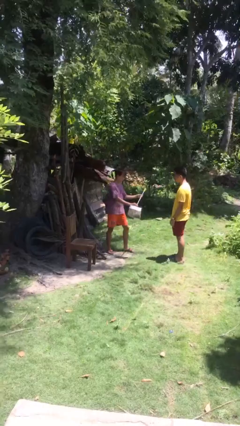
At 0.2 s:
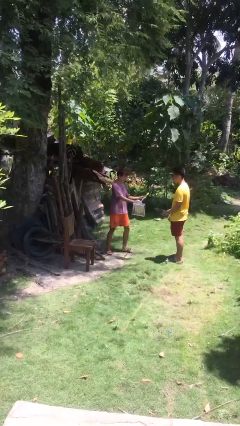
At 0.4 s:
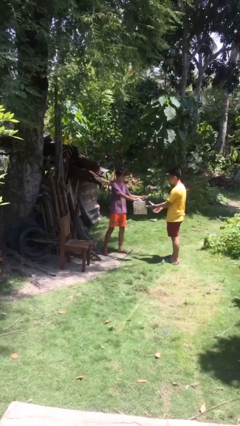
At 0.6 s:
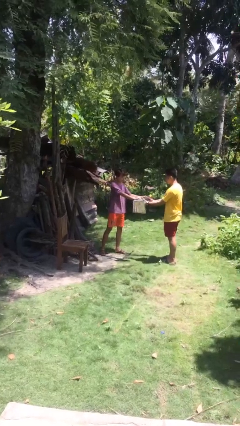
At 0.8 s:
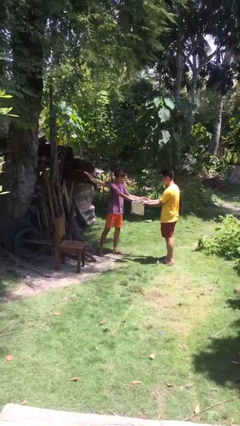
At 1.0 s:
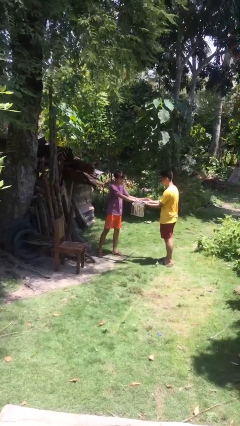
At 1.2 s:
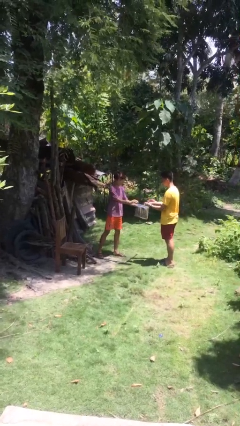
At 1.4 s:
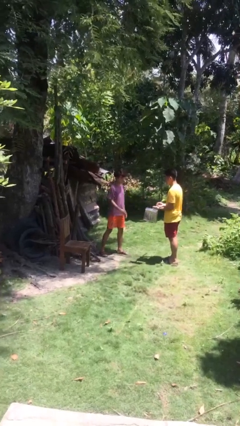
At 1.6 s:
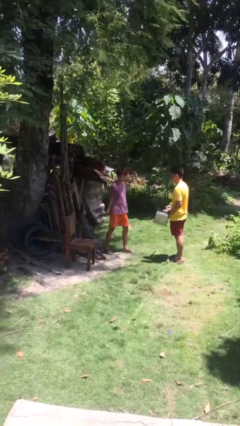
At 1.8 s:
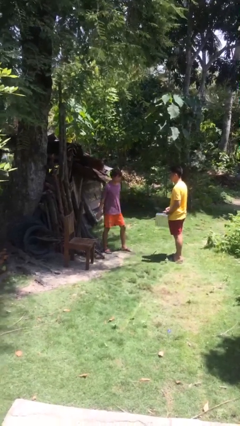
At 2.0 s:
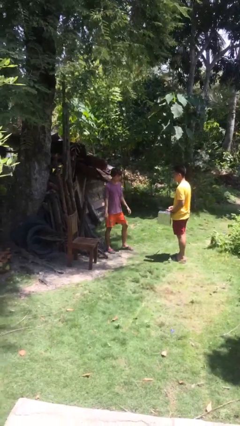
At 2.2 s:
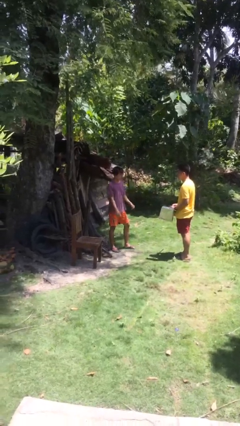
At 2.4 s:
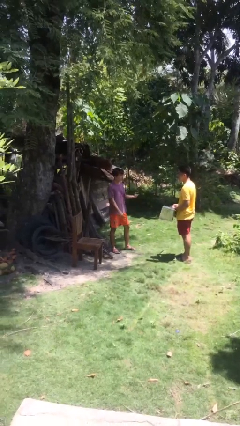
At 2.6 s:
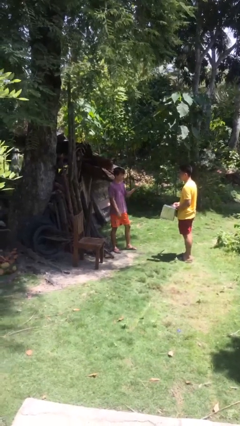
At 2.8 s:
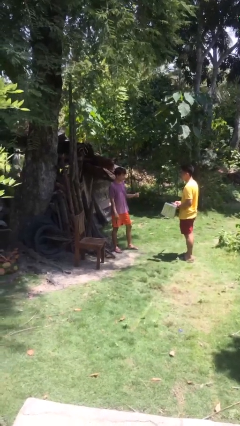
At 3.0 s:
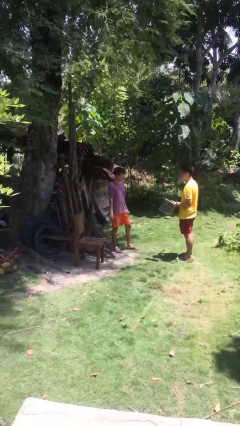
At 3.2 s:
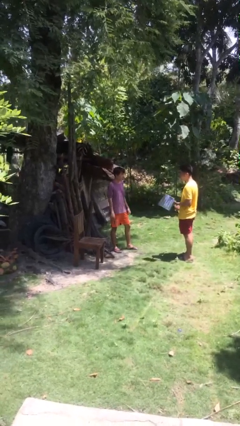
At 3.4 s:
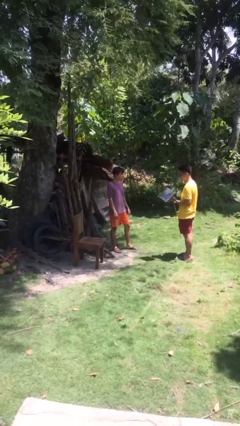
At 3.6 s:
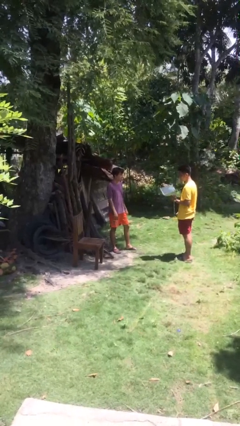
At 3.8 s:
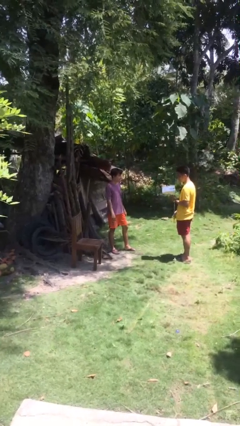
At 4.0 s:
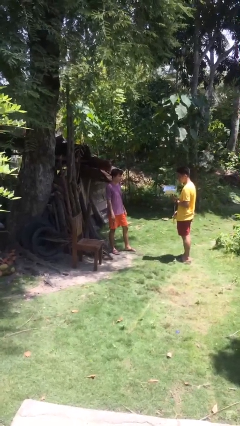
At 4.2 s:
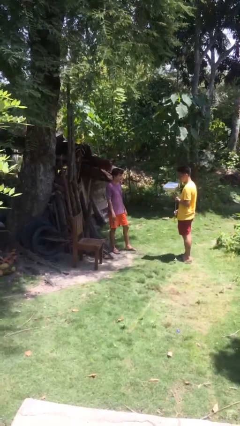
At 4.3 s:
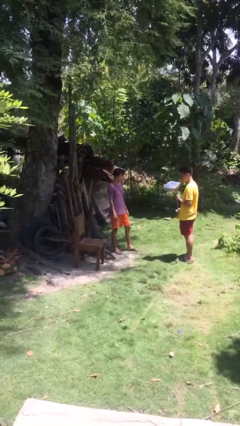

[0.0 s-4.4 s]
person transfers object to person

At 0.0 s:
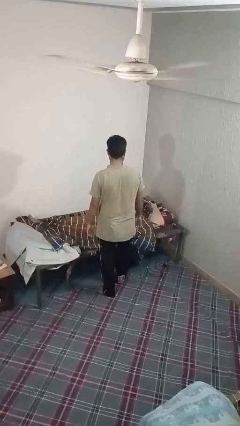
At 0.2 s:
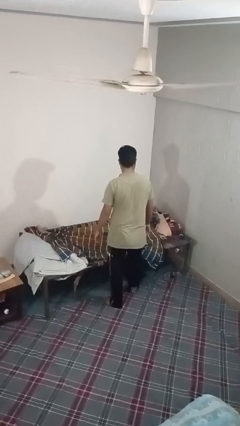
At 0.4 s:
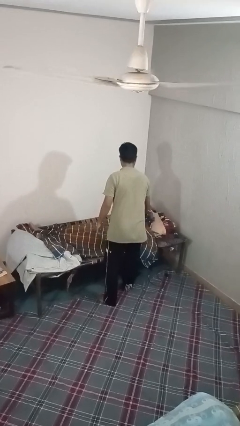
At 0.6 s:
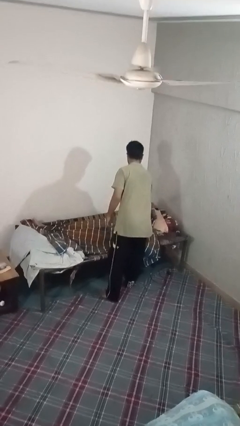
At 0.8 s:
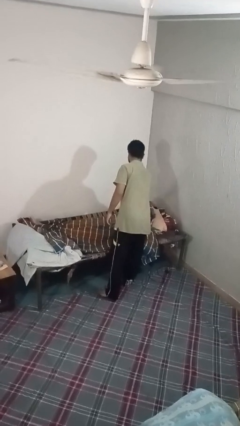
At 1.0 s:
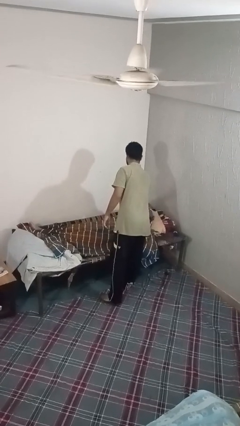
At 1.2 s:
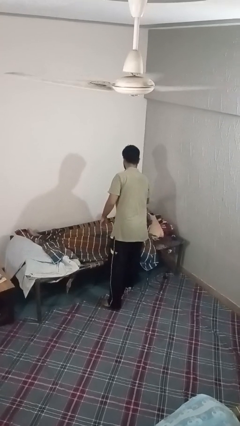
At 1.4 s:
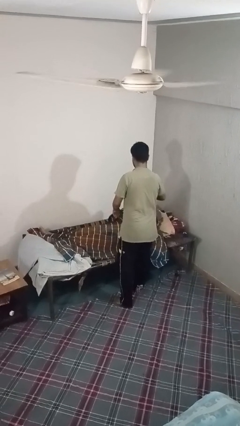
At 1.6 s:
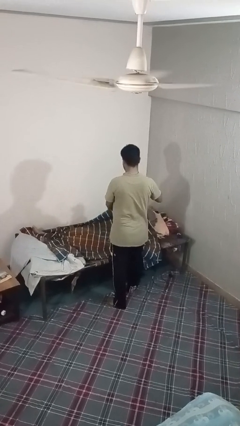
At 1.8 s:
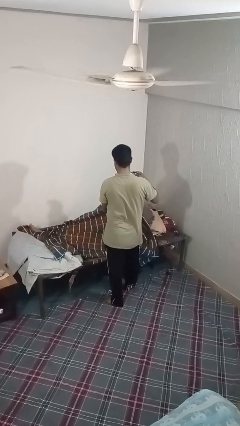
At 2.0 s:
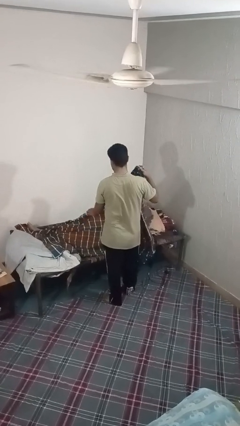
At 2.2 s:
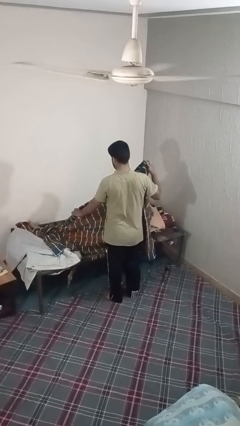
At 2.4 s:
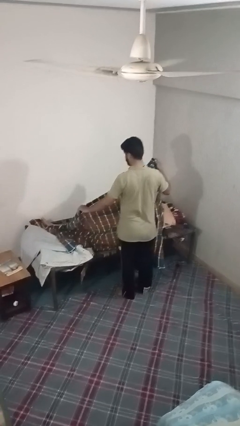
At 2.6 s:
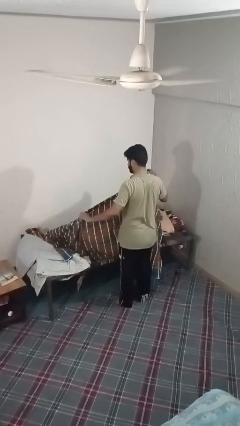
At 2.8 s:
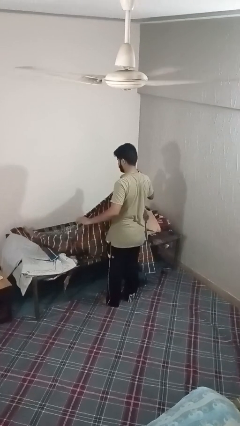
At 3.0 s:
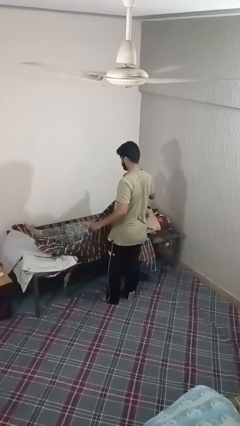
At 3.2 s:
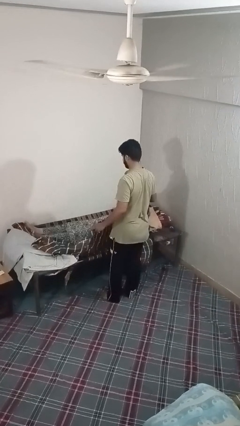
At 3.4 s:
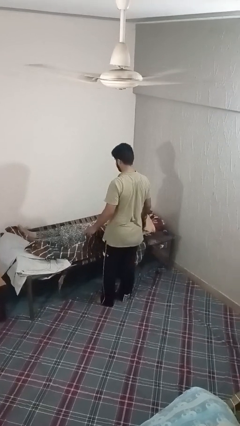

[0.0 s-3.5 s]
person uncovers friend with blanket

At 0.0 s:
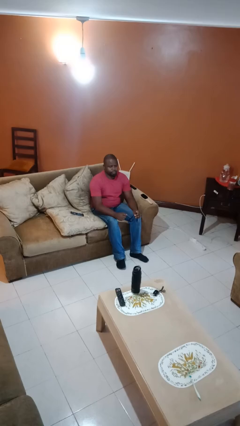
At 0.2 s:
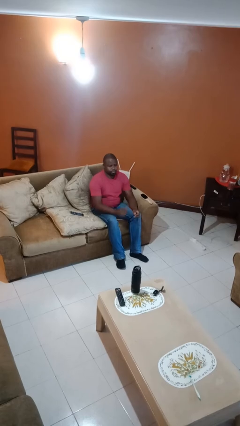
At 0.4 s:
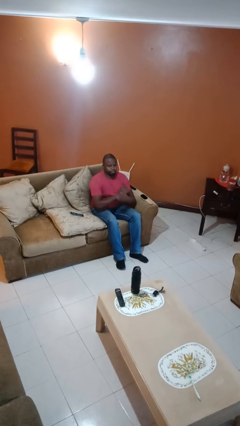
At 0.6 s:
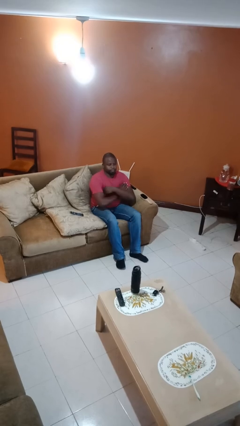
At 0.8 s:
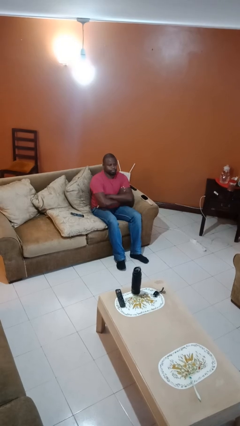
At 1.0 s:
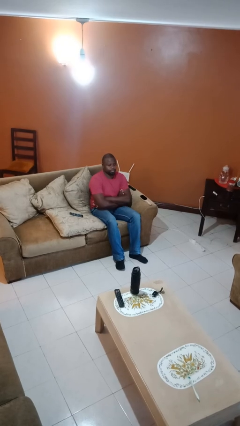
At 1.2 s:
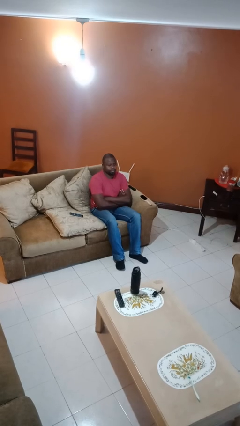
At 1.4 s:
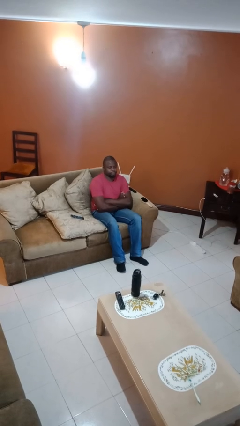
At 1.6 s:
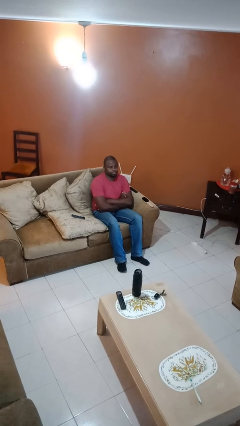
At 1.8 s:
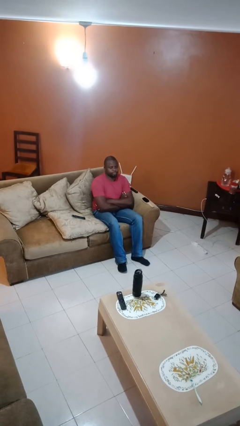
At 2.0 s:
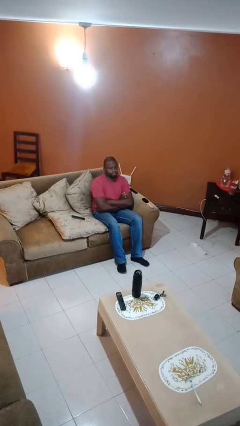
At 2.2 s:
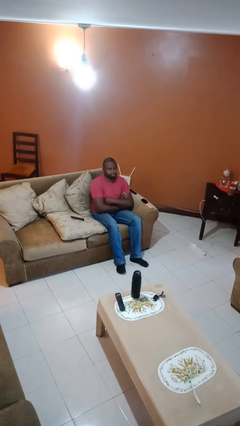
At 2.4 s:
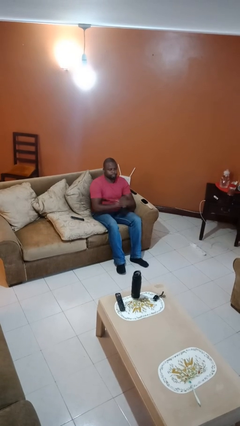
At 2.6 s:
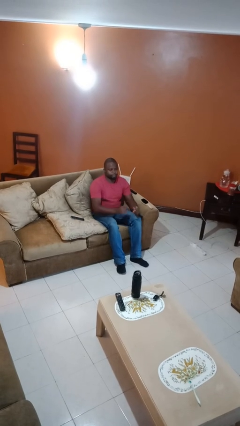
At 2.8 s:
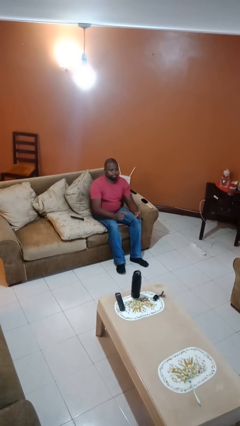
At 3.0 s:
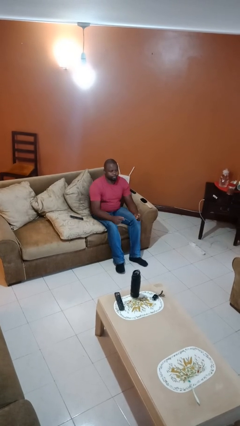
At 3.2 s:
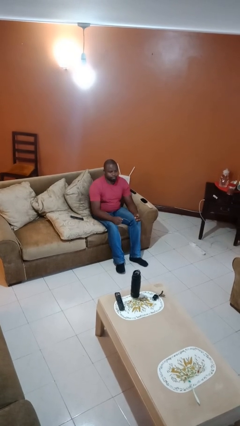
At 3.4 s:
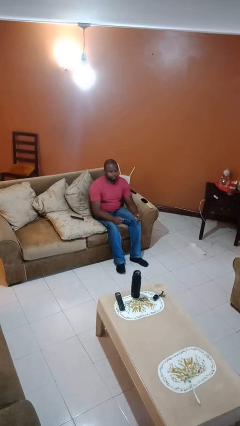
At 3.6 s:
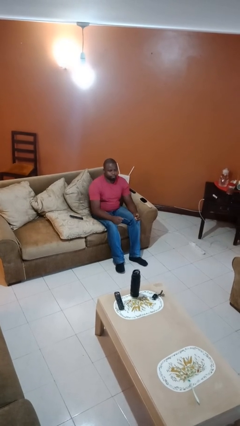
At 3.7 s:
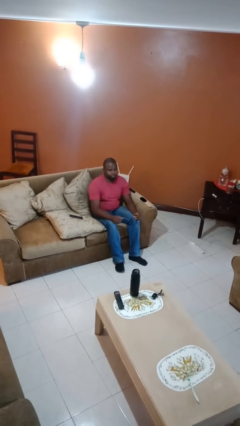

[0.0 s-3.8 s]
person crosses arms

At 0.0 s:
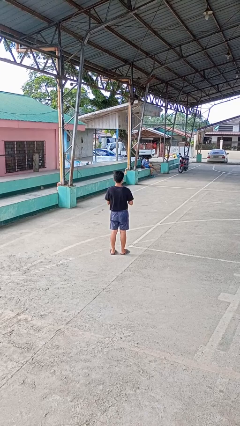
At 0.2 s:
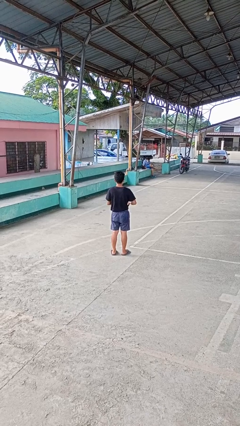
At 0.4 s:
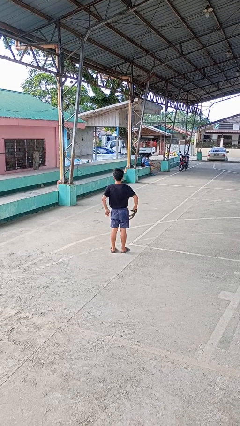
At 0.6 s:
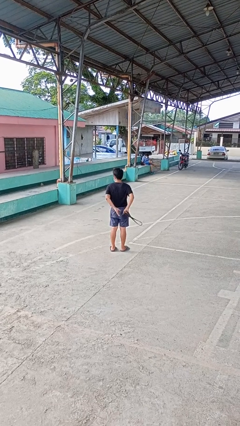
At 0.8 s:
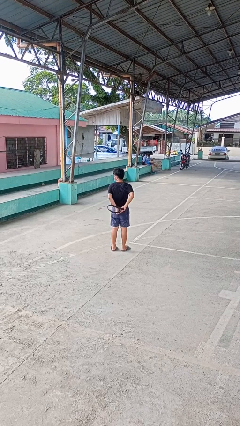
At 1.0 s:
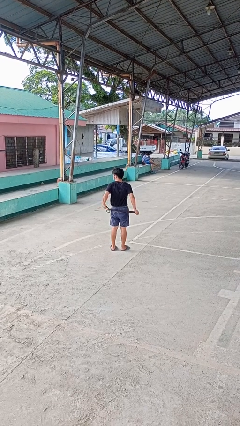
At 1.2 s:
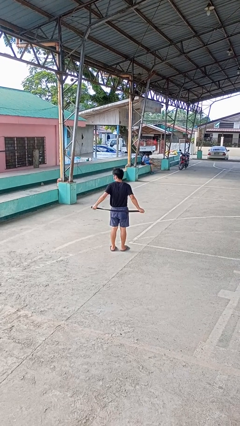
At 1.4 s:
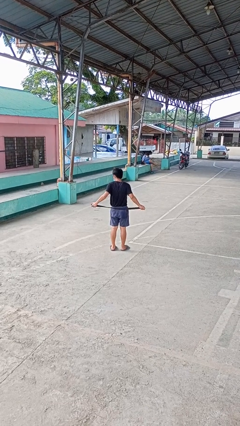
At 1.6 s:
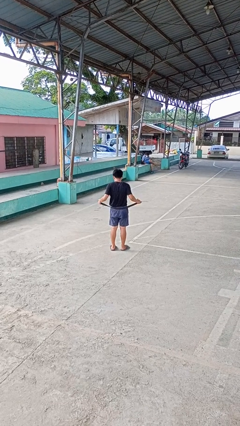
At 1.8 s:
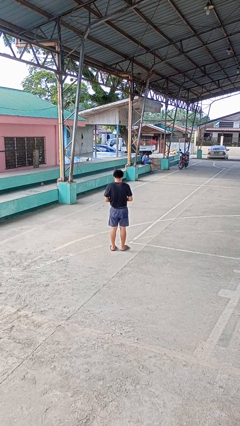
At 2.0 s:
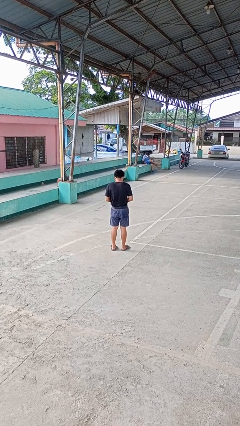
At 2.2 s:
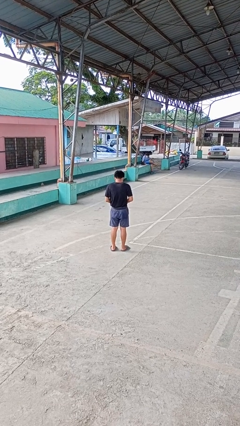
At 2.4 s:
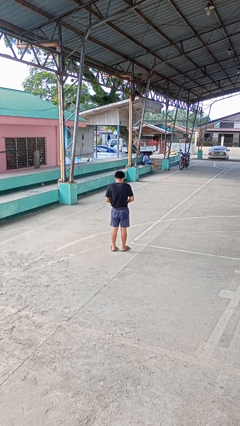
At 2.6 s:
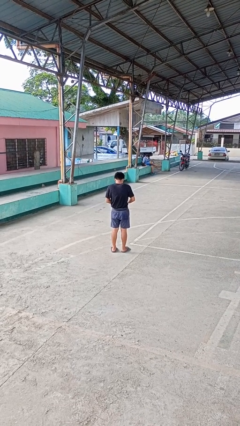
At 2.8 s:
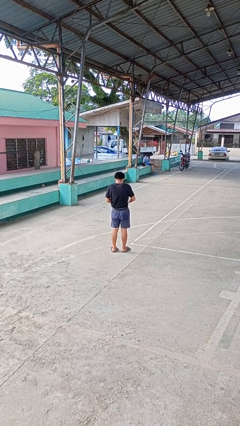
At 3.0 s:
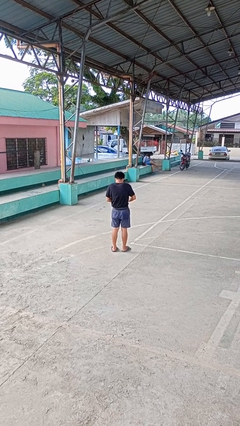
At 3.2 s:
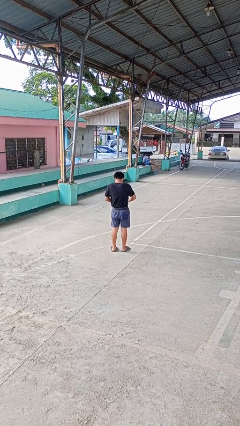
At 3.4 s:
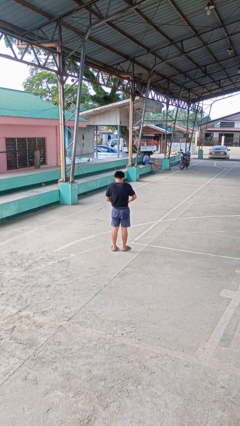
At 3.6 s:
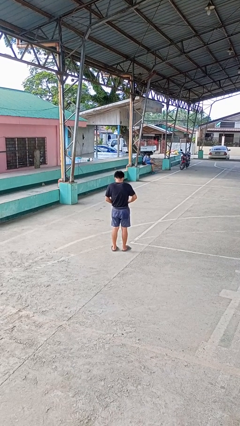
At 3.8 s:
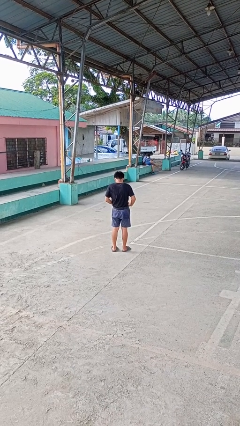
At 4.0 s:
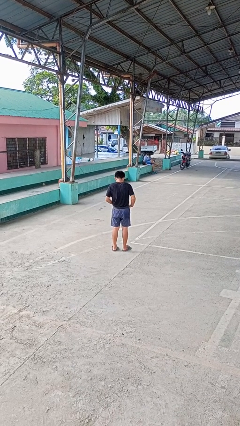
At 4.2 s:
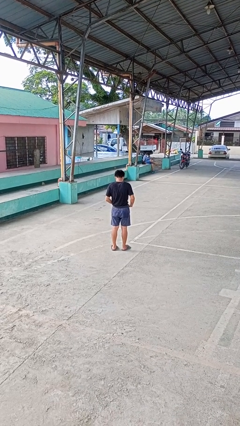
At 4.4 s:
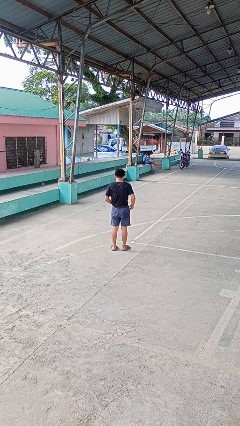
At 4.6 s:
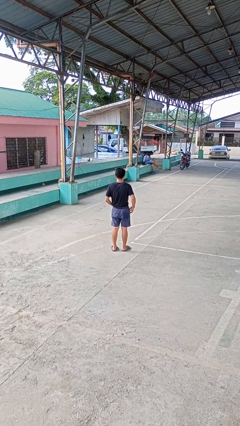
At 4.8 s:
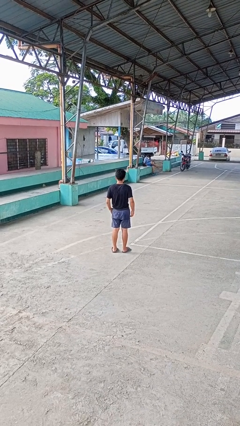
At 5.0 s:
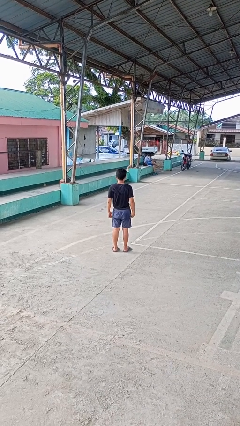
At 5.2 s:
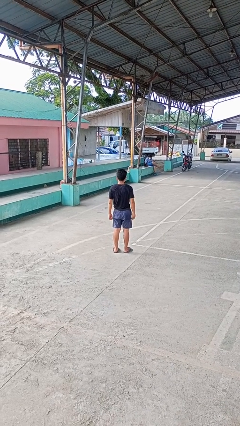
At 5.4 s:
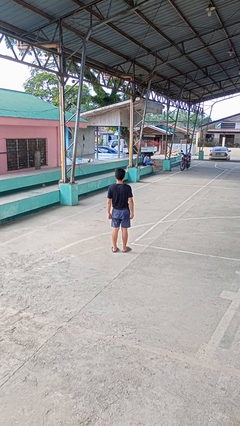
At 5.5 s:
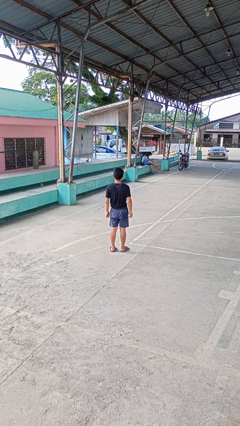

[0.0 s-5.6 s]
person puts on belt

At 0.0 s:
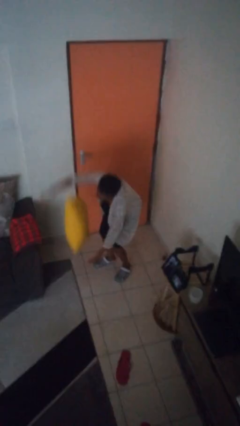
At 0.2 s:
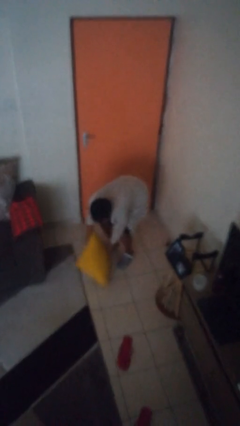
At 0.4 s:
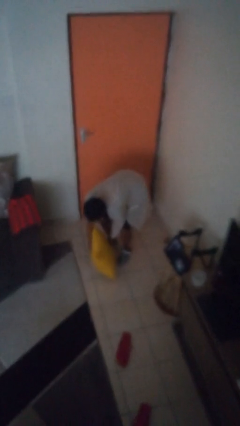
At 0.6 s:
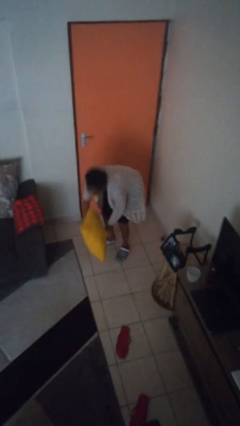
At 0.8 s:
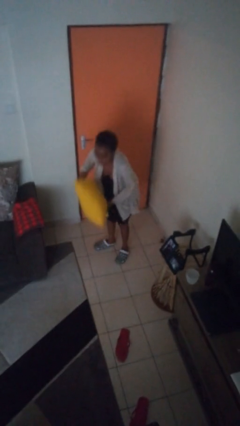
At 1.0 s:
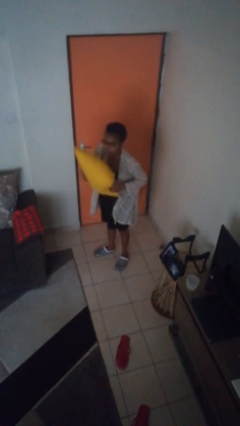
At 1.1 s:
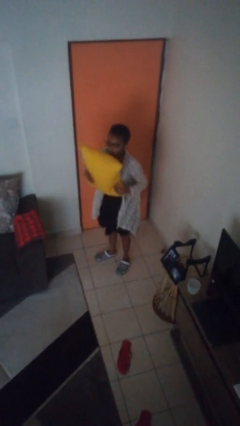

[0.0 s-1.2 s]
person catches dropped object
